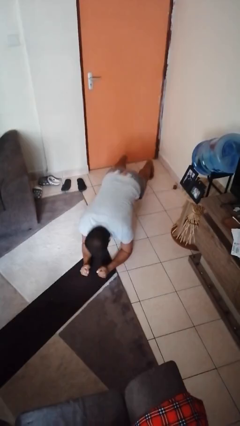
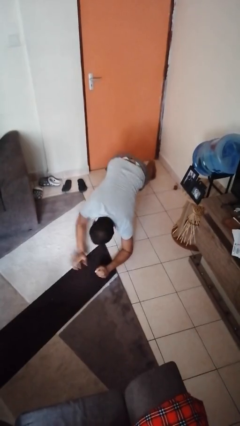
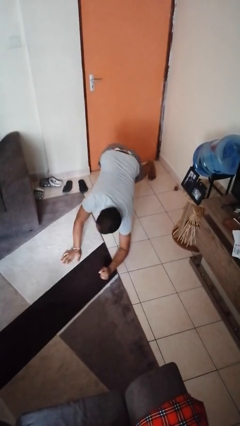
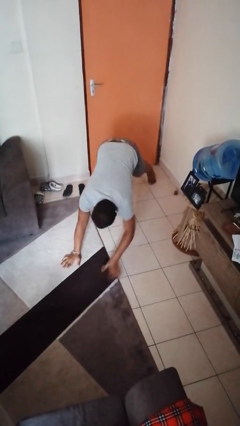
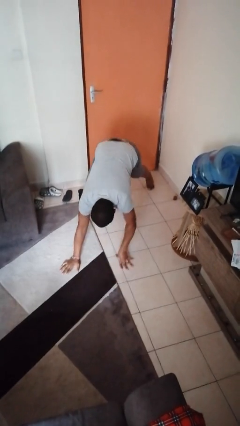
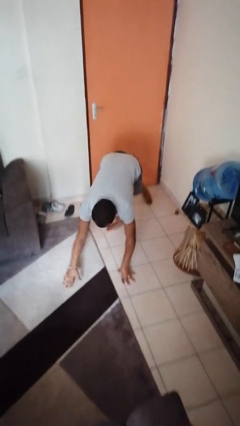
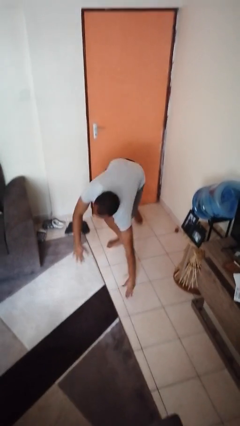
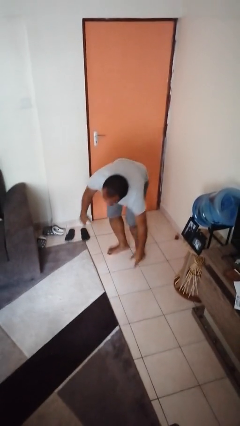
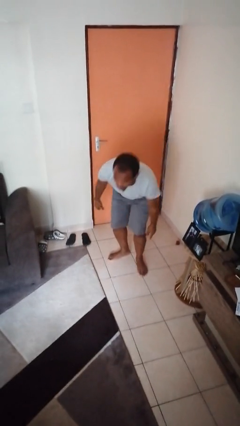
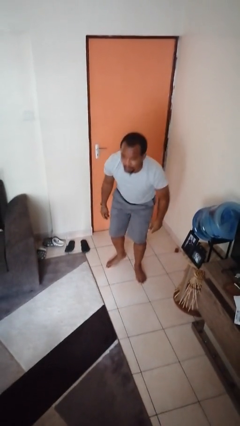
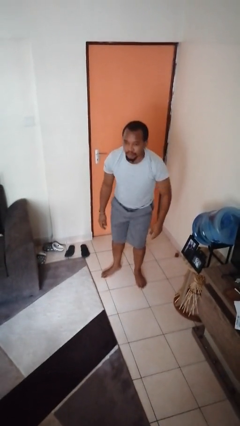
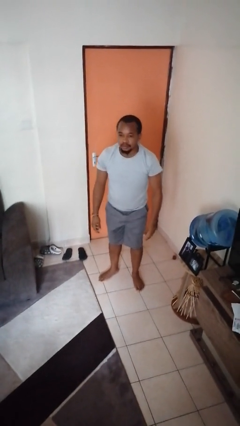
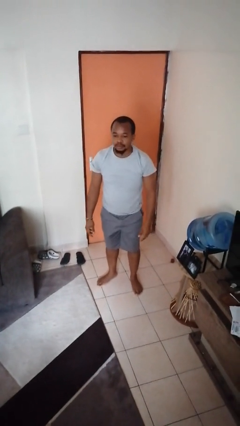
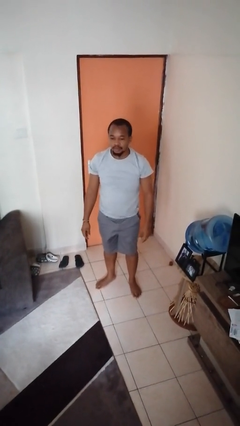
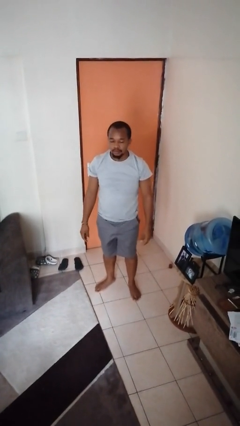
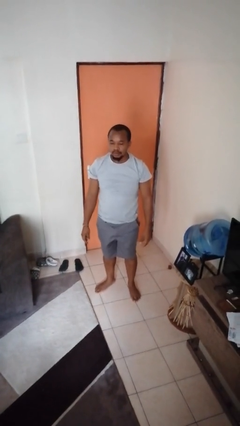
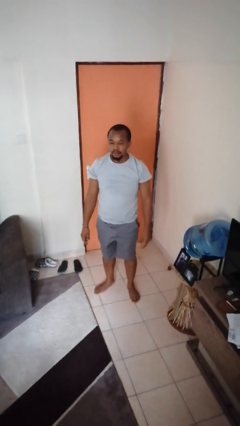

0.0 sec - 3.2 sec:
person stands up from floor

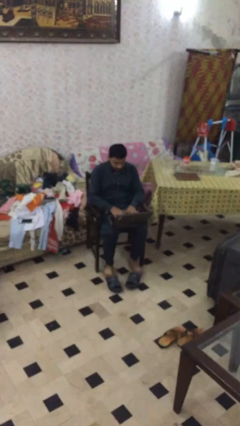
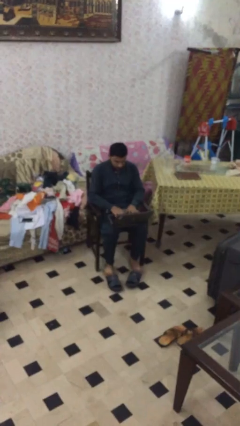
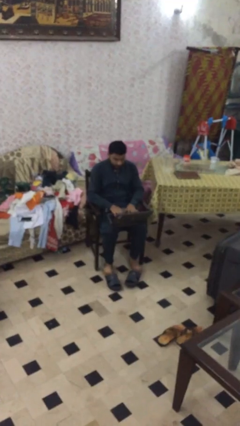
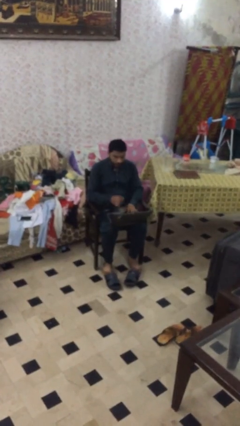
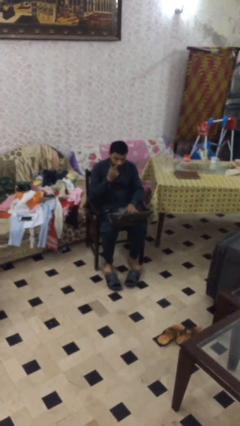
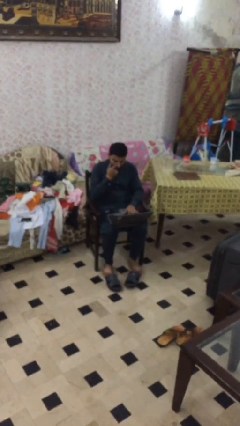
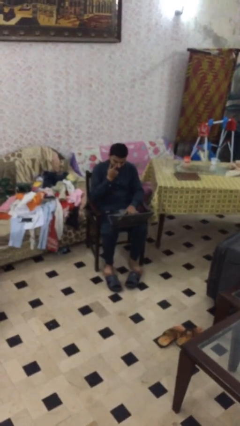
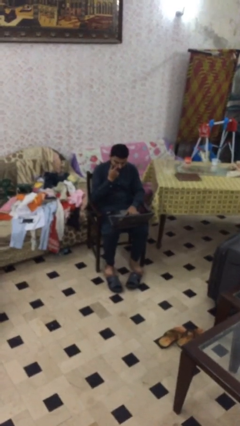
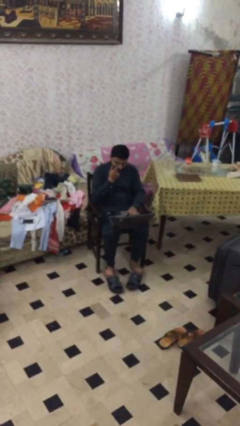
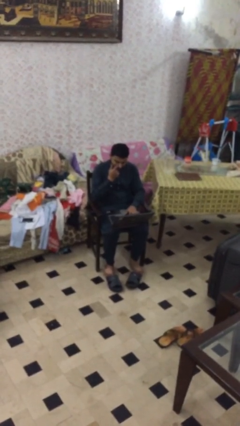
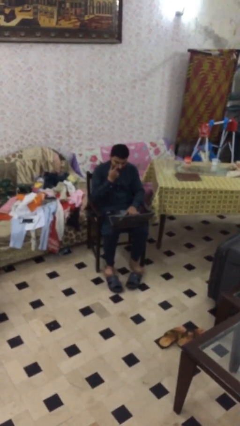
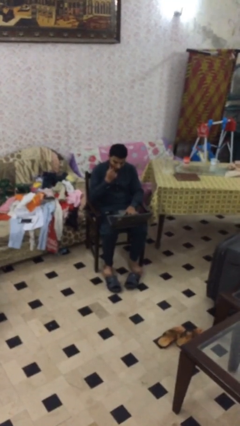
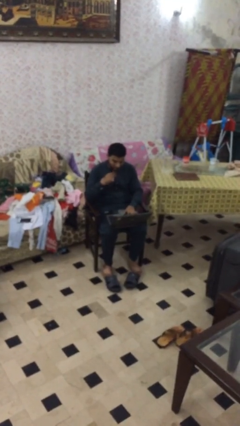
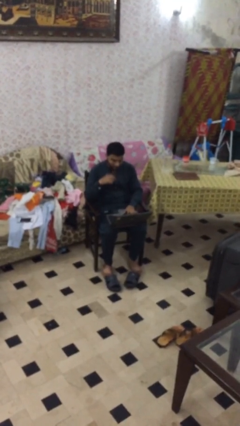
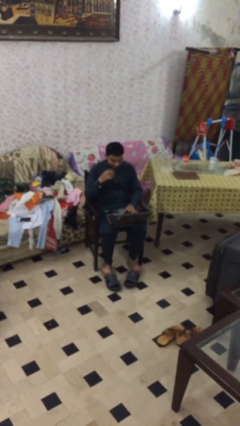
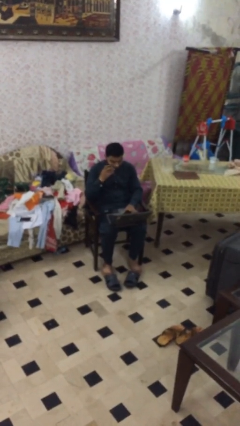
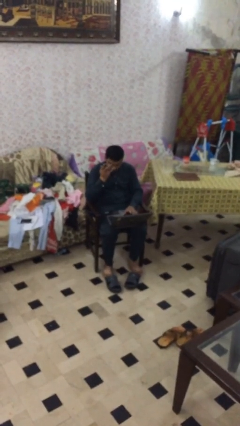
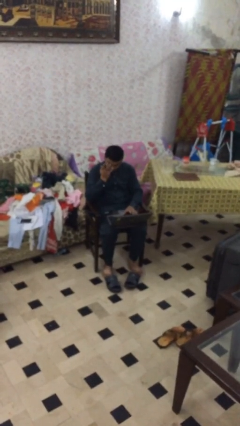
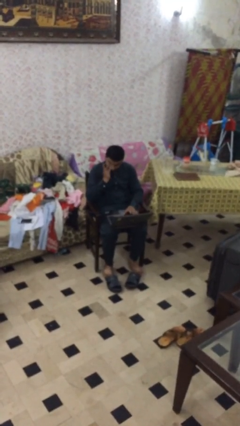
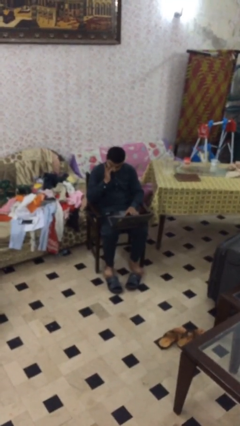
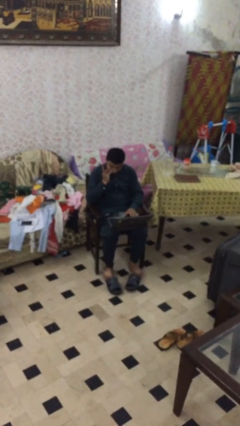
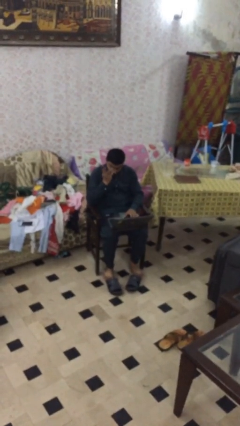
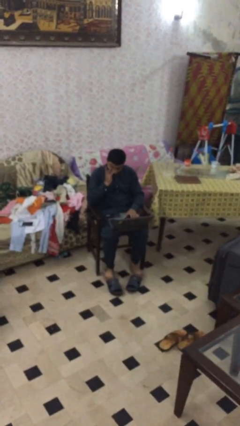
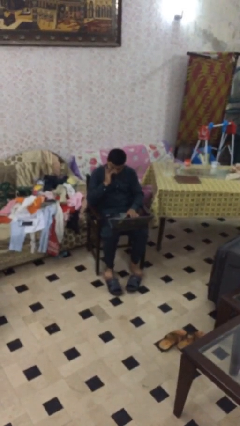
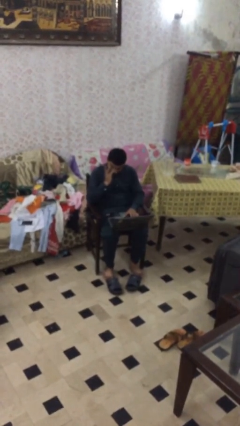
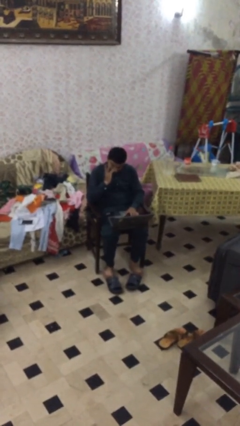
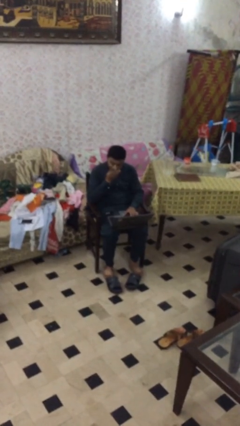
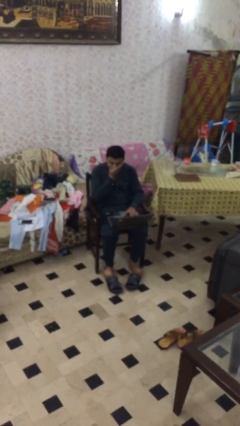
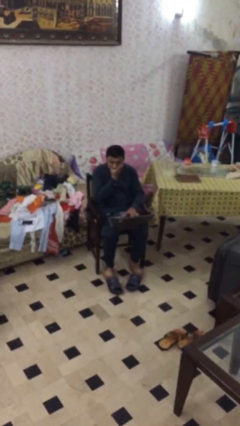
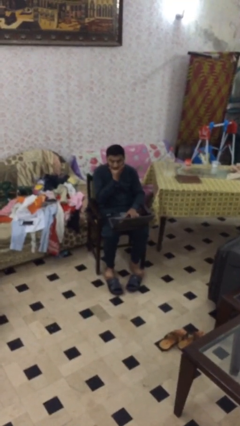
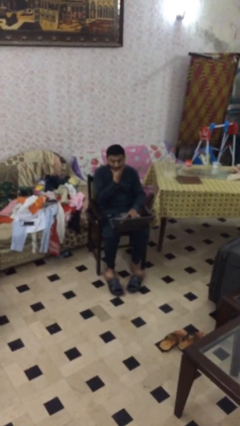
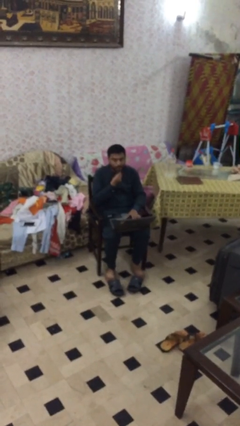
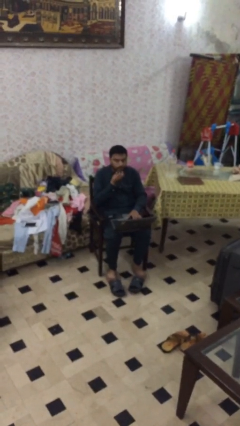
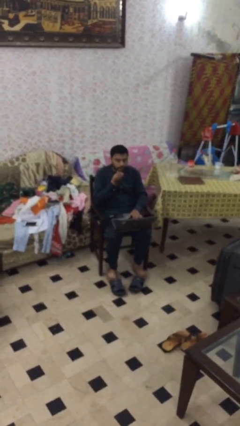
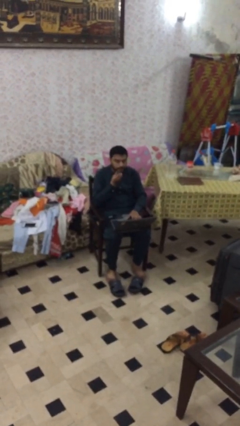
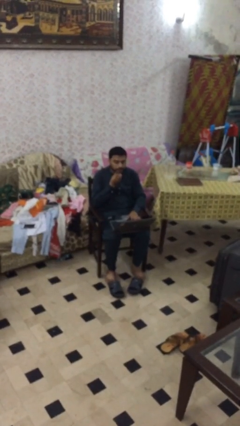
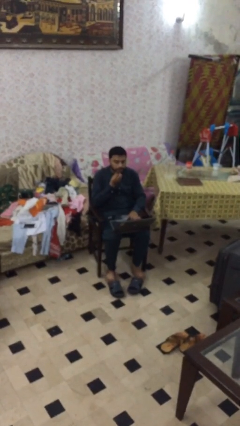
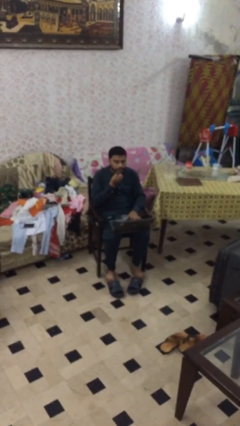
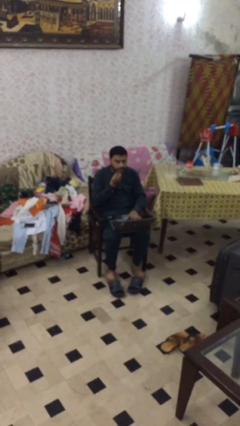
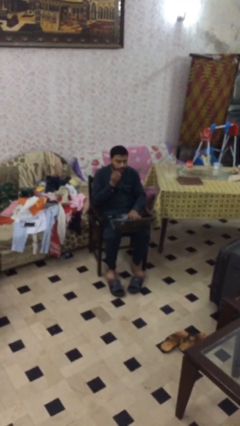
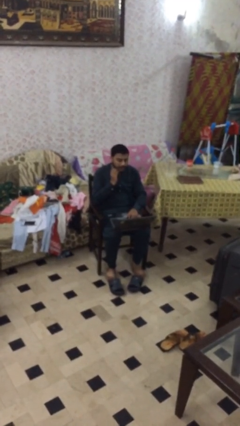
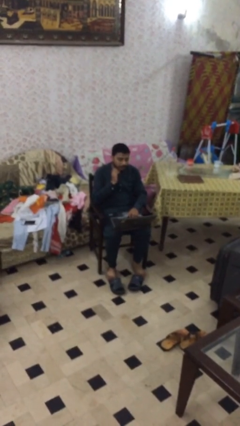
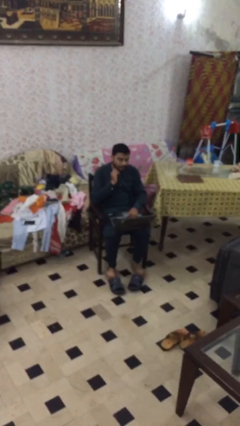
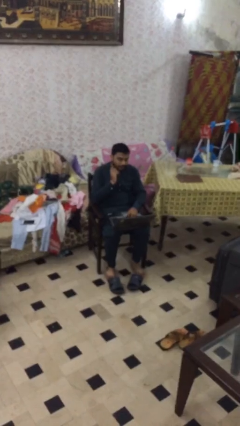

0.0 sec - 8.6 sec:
person interacts with laptop

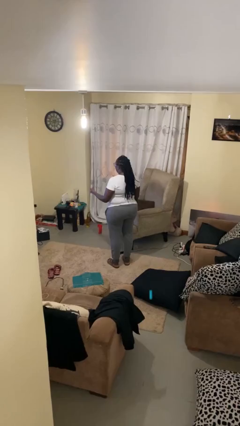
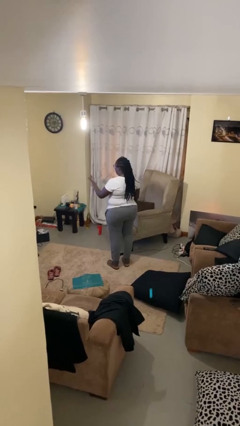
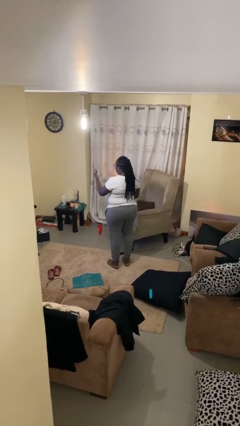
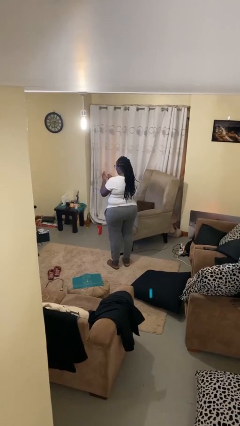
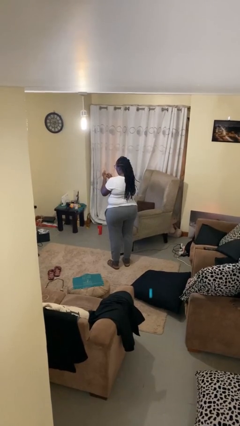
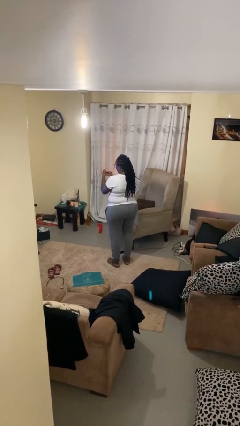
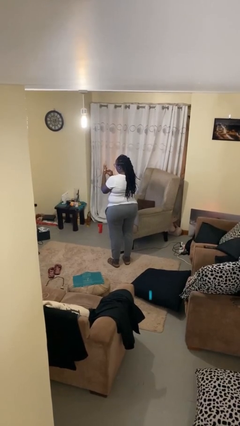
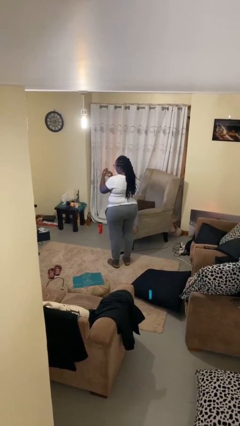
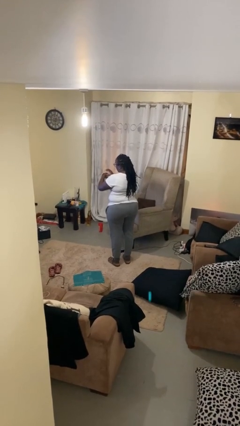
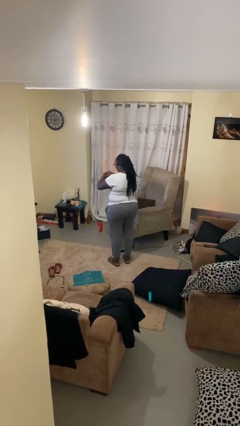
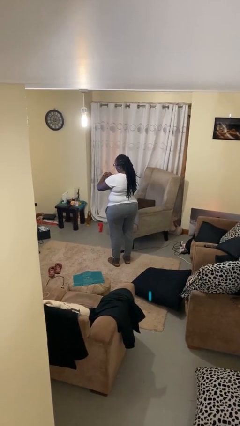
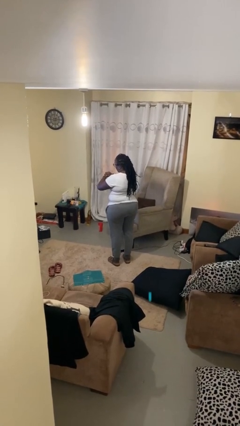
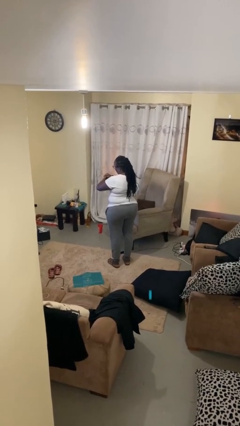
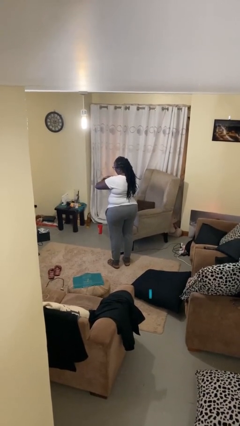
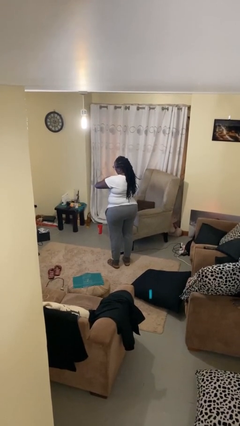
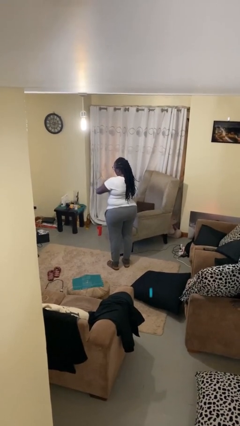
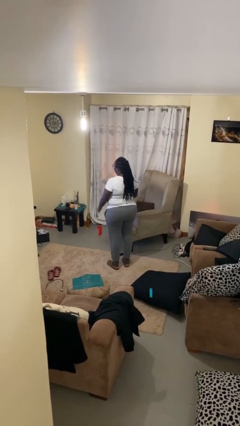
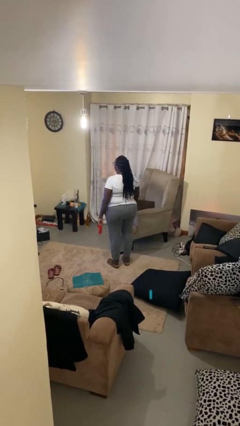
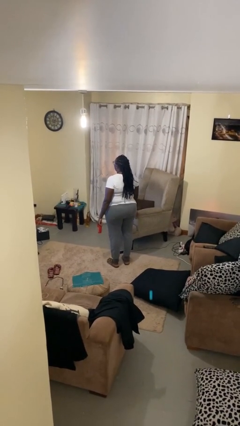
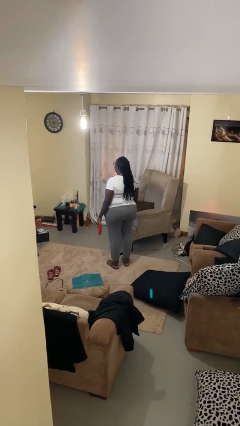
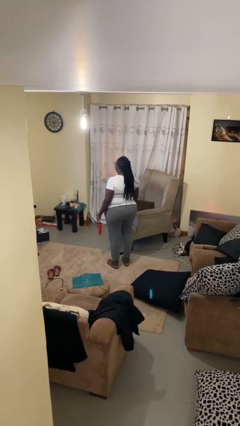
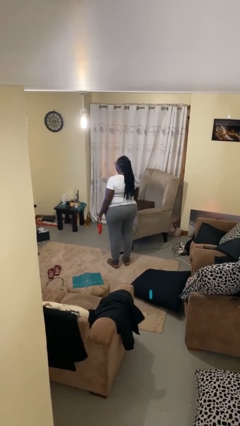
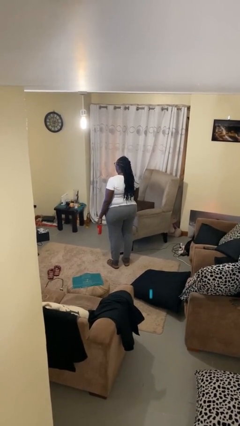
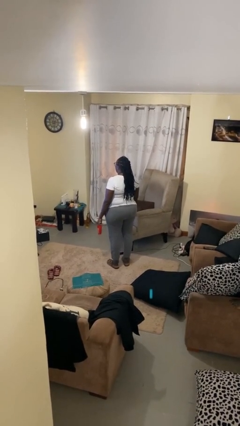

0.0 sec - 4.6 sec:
person puts on wristwatch

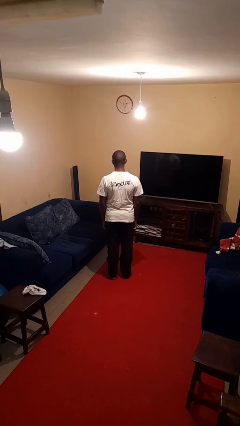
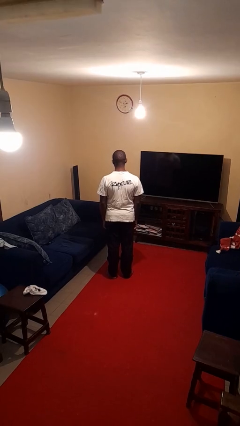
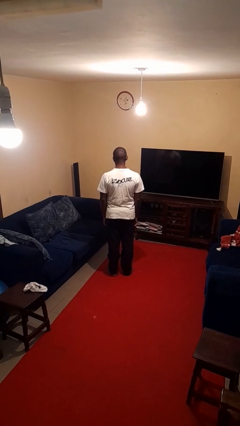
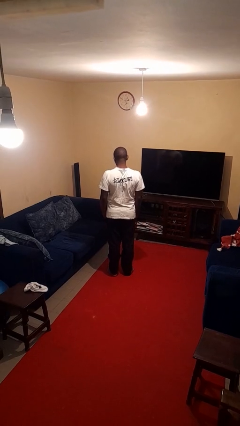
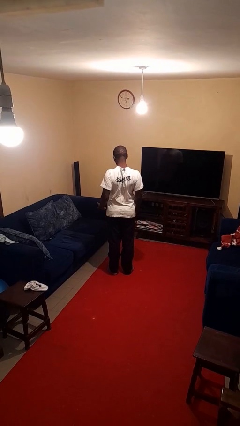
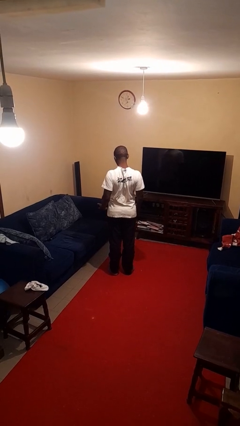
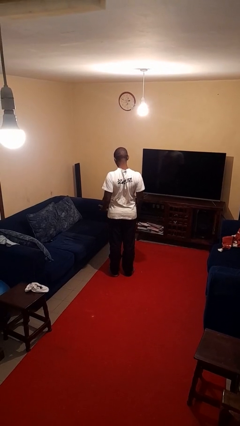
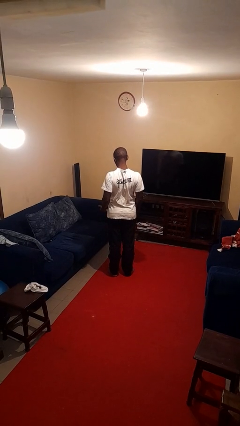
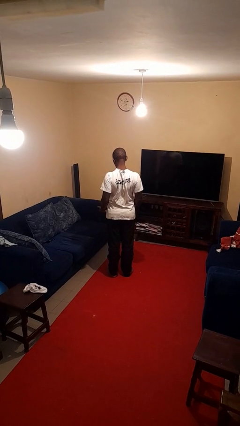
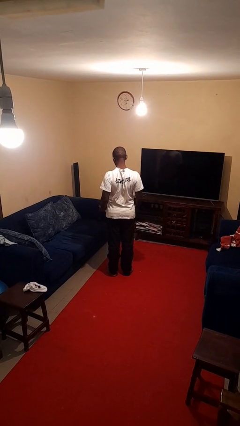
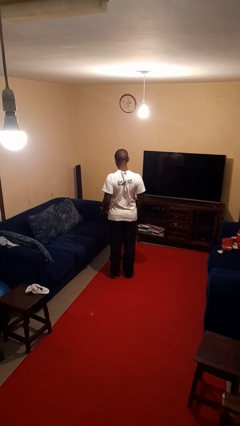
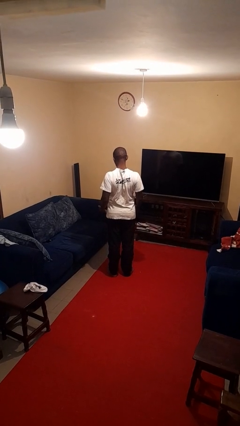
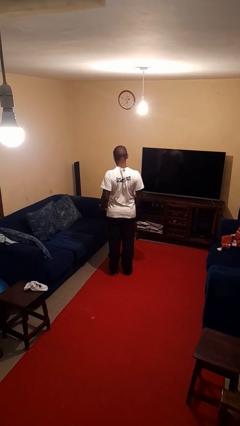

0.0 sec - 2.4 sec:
person shrugs
